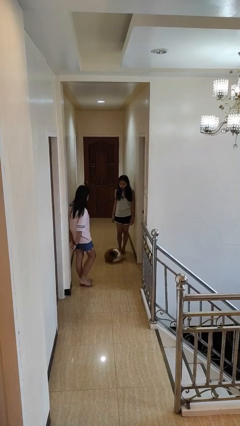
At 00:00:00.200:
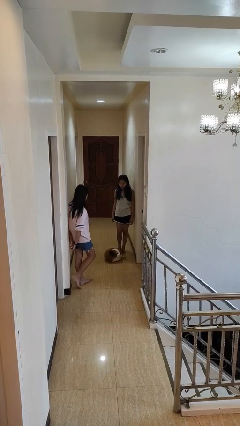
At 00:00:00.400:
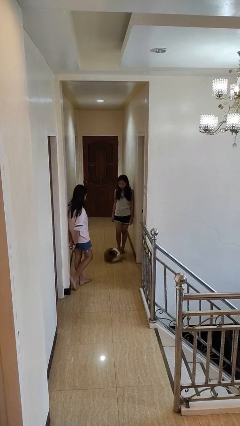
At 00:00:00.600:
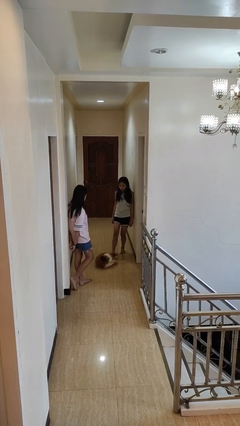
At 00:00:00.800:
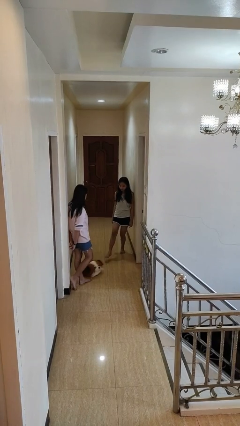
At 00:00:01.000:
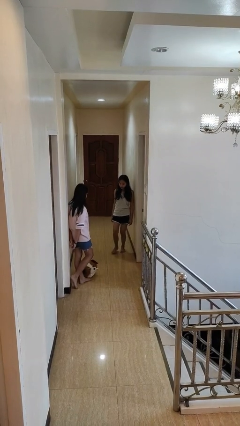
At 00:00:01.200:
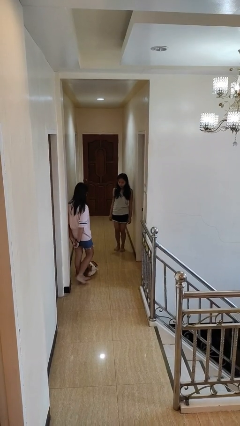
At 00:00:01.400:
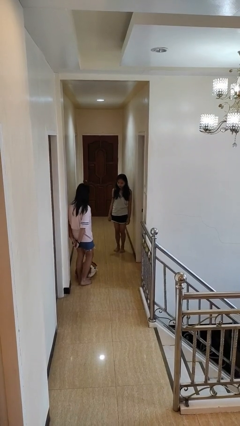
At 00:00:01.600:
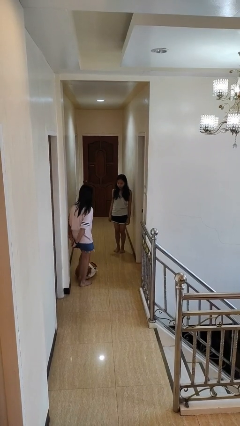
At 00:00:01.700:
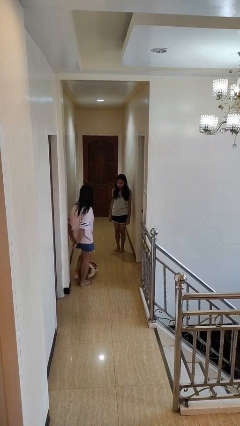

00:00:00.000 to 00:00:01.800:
person kicks object to person

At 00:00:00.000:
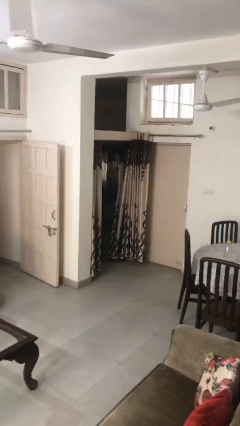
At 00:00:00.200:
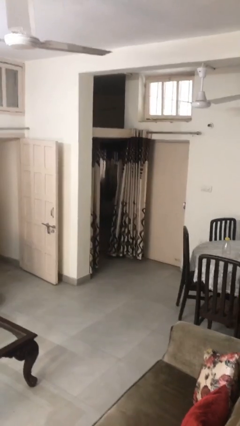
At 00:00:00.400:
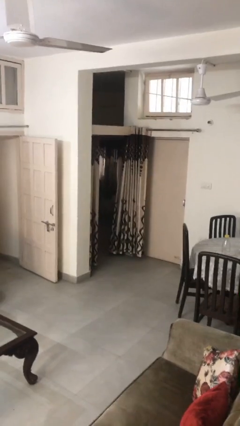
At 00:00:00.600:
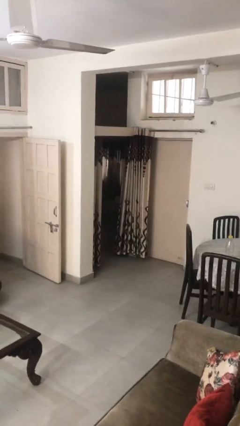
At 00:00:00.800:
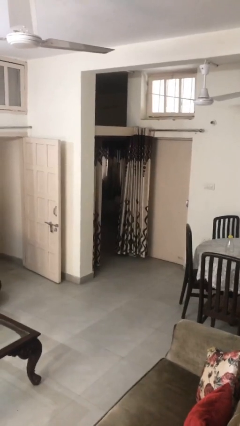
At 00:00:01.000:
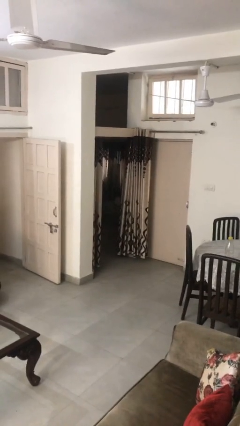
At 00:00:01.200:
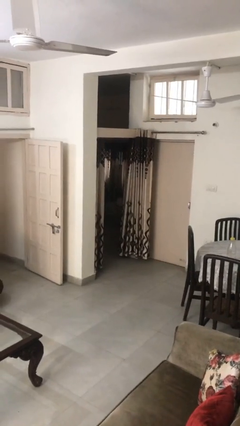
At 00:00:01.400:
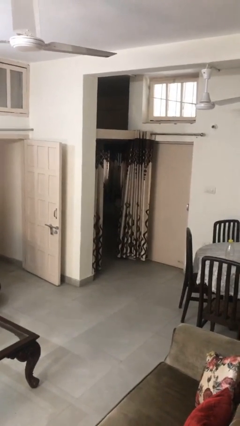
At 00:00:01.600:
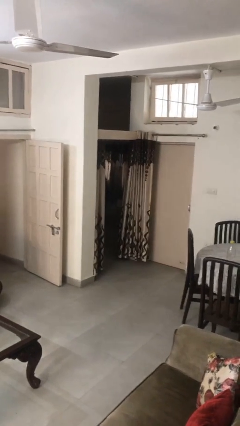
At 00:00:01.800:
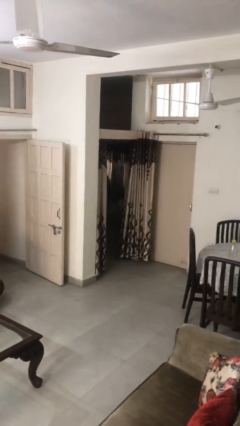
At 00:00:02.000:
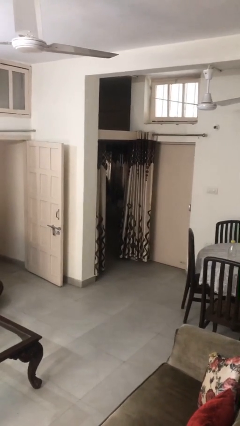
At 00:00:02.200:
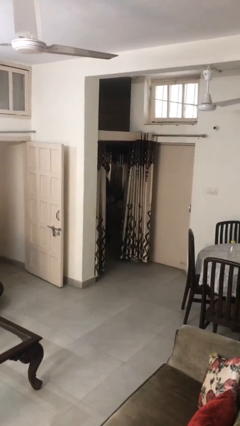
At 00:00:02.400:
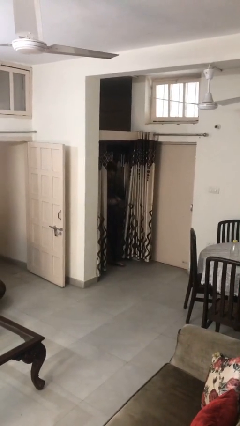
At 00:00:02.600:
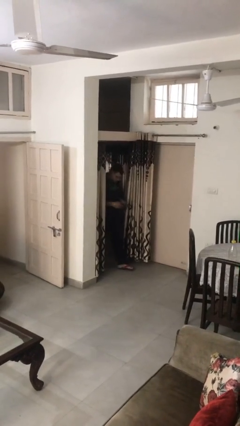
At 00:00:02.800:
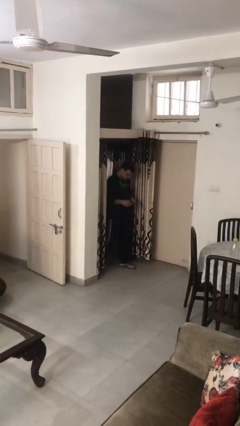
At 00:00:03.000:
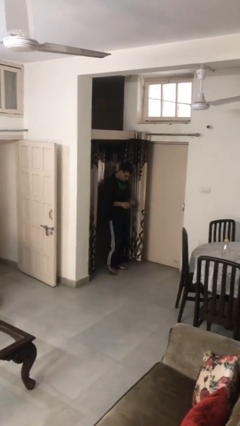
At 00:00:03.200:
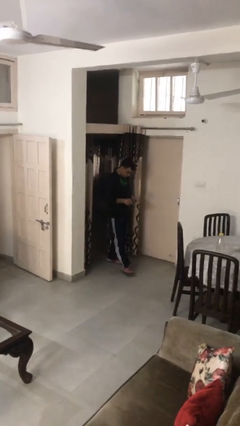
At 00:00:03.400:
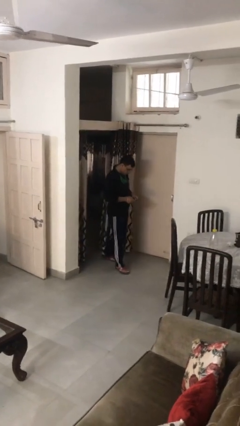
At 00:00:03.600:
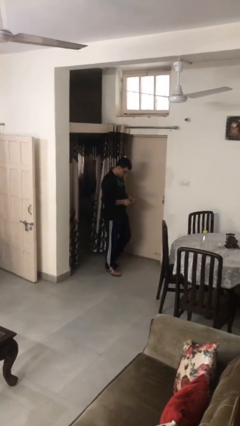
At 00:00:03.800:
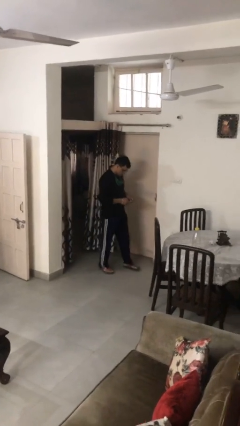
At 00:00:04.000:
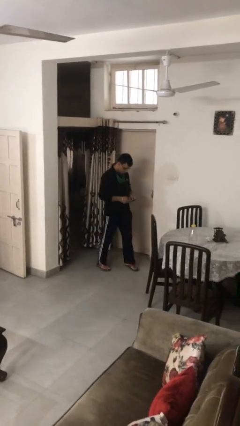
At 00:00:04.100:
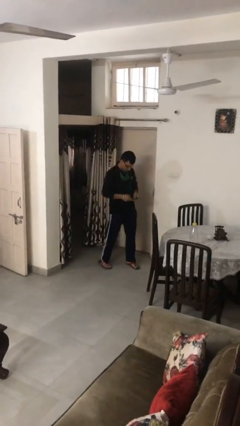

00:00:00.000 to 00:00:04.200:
person enters scene through structure

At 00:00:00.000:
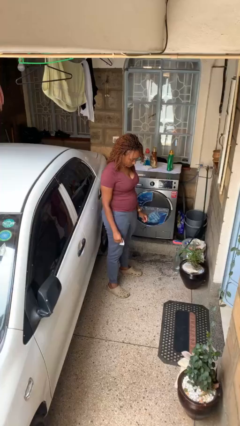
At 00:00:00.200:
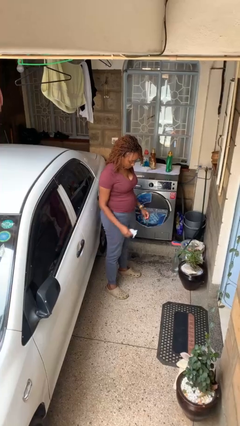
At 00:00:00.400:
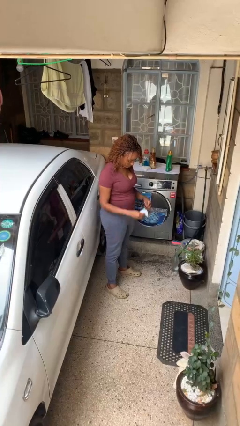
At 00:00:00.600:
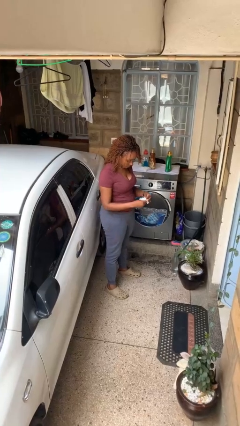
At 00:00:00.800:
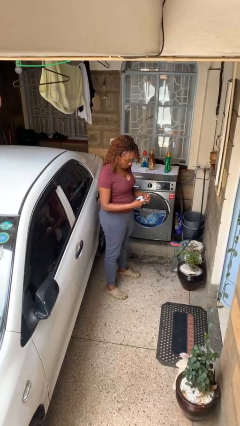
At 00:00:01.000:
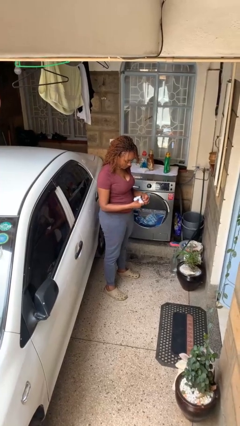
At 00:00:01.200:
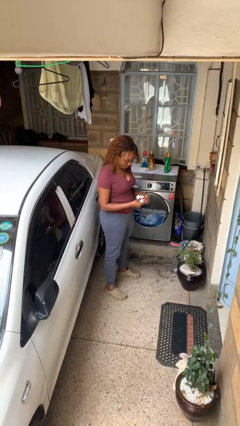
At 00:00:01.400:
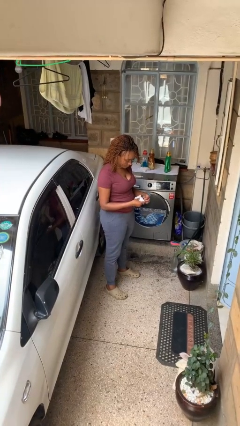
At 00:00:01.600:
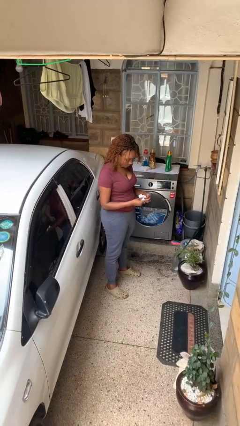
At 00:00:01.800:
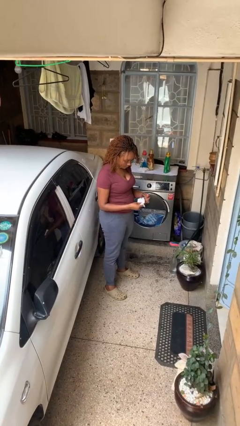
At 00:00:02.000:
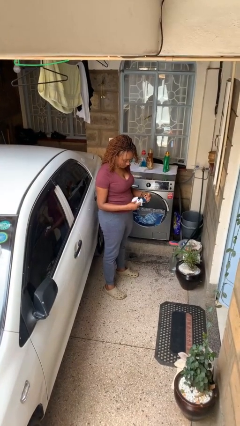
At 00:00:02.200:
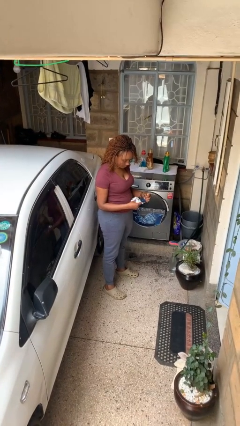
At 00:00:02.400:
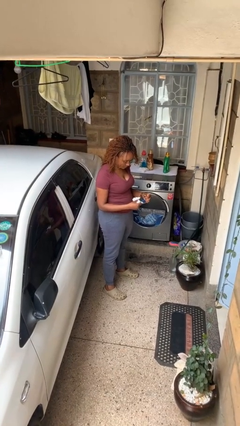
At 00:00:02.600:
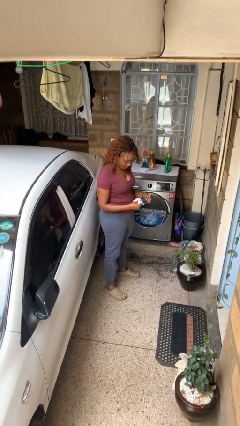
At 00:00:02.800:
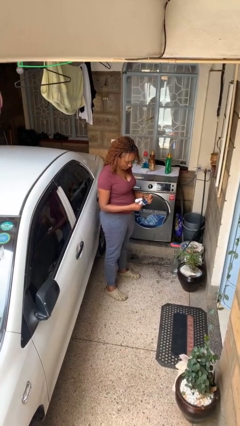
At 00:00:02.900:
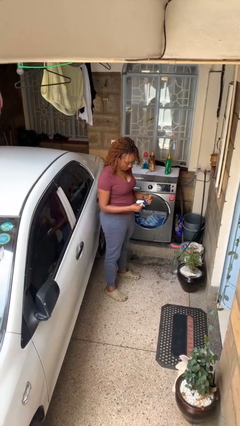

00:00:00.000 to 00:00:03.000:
person cleans eyeglasses

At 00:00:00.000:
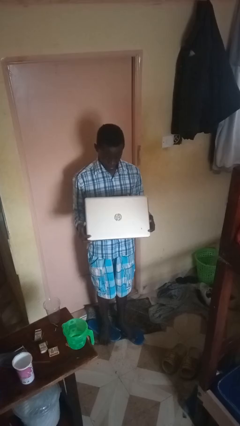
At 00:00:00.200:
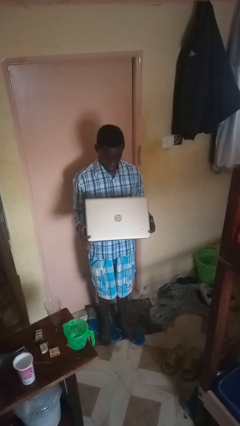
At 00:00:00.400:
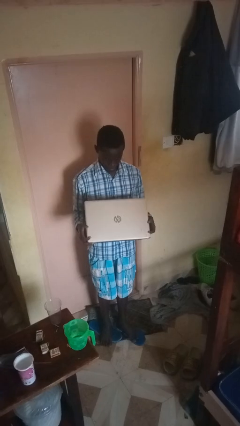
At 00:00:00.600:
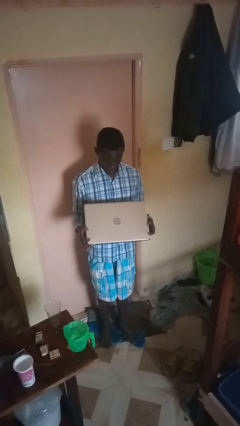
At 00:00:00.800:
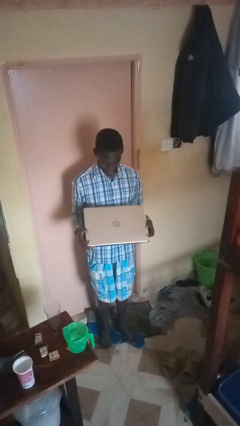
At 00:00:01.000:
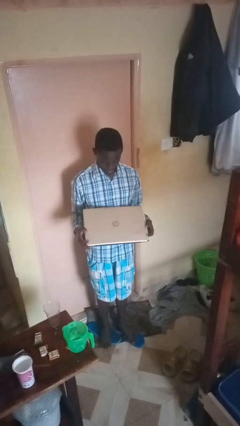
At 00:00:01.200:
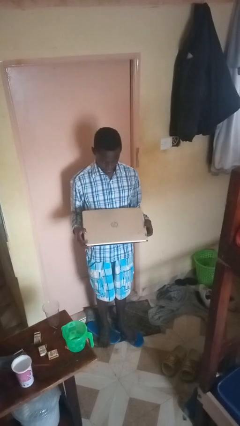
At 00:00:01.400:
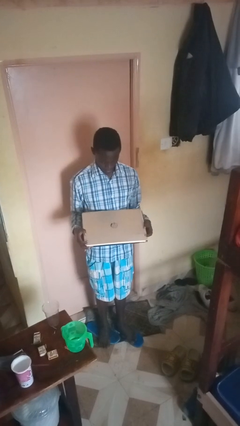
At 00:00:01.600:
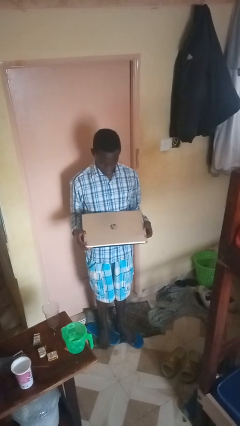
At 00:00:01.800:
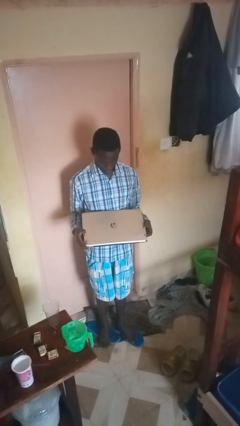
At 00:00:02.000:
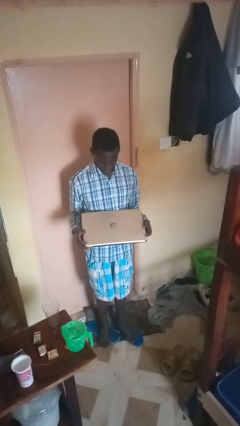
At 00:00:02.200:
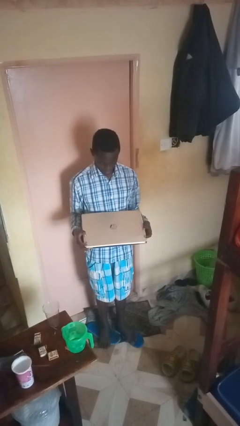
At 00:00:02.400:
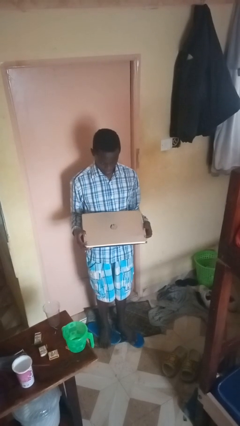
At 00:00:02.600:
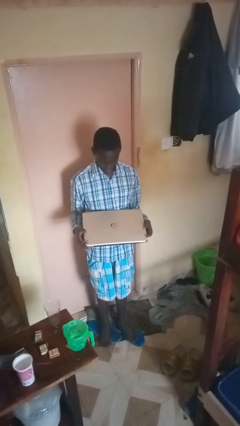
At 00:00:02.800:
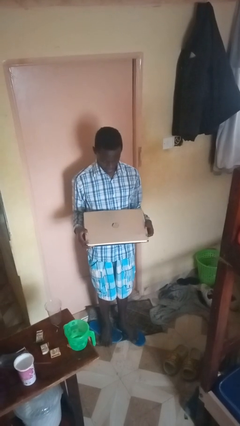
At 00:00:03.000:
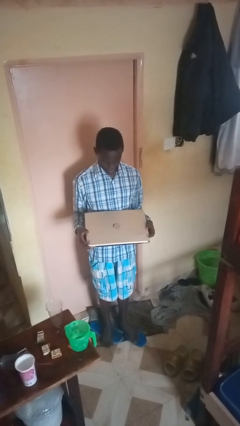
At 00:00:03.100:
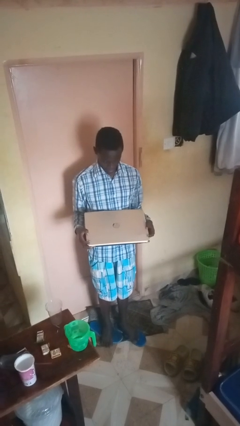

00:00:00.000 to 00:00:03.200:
person closes laptop

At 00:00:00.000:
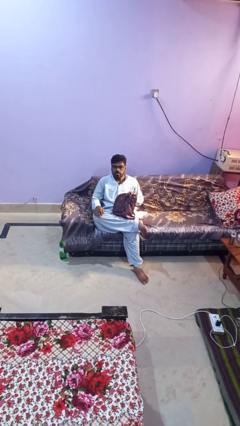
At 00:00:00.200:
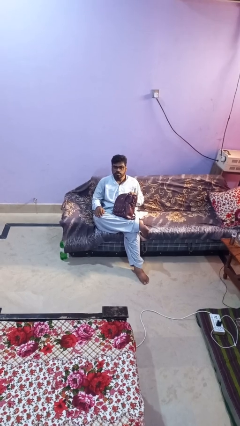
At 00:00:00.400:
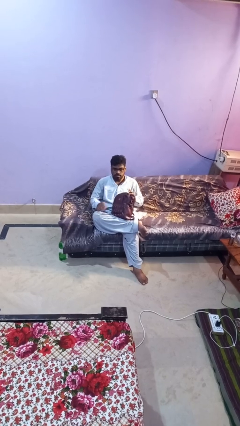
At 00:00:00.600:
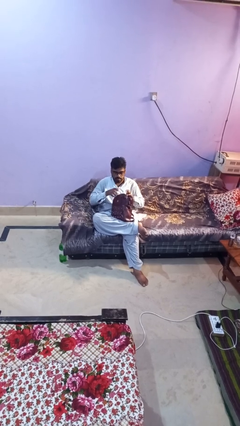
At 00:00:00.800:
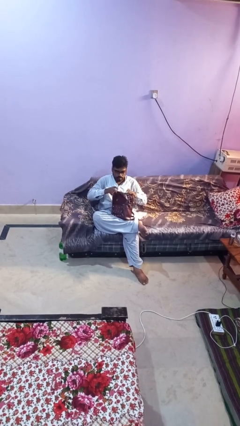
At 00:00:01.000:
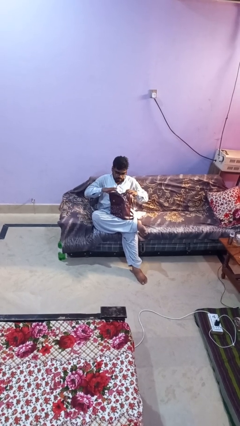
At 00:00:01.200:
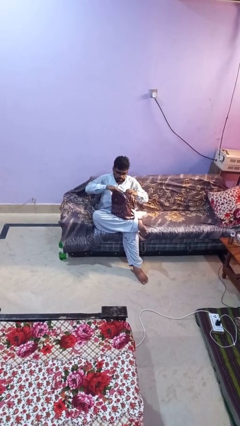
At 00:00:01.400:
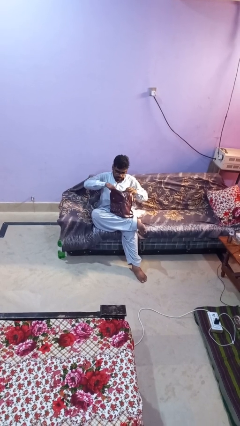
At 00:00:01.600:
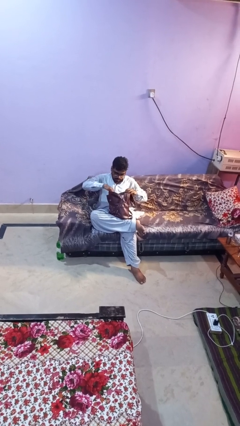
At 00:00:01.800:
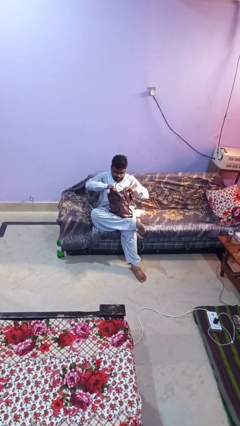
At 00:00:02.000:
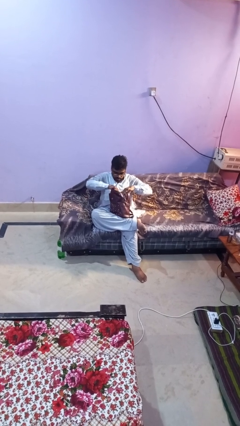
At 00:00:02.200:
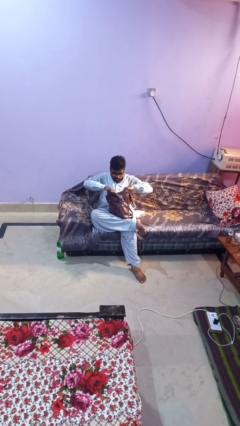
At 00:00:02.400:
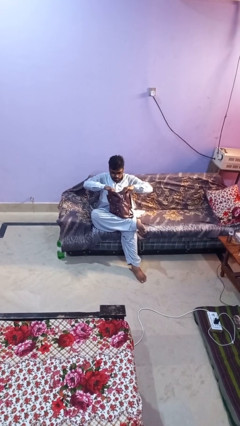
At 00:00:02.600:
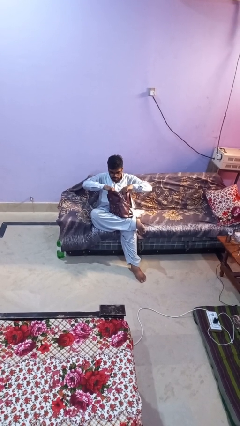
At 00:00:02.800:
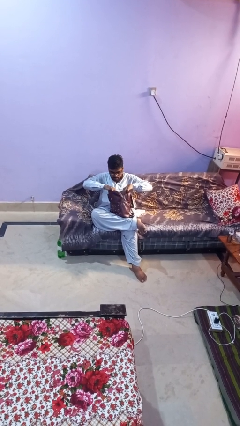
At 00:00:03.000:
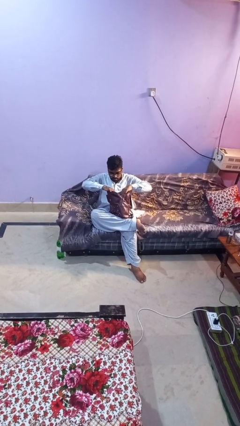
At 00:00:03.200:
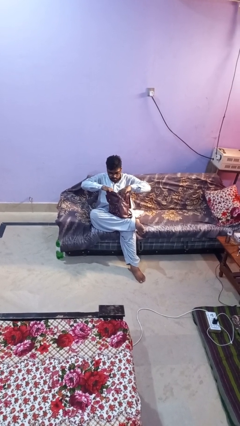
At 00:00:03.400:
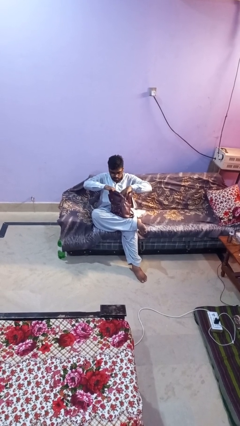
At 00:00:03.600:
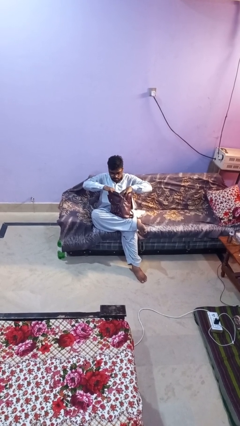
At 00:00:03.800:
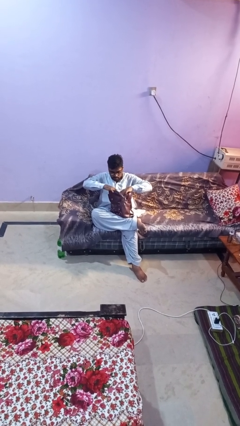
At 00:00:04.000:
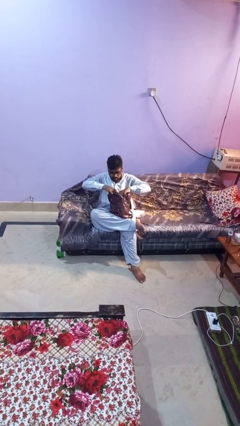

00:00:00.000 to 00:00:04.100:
person searches in backpack

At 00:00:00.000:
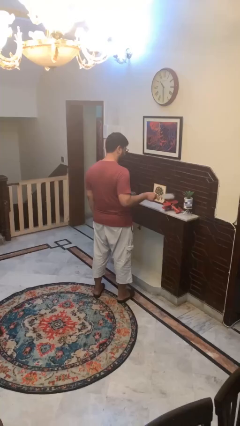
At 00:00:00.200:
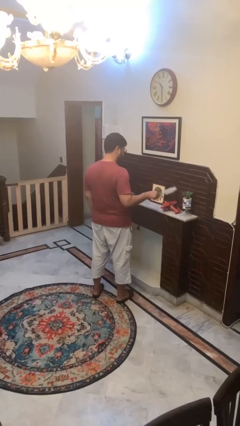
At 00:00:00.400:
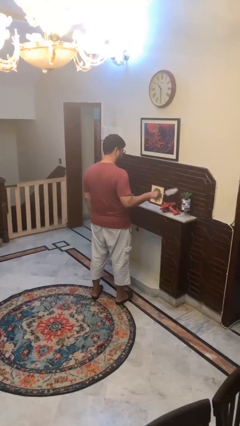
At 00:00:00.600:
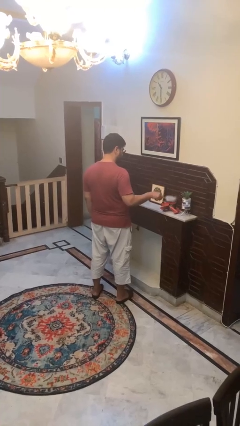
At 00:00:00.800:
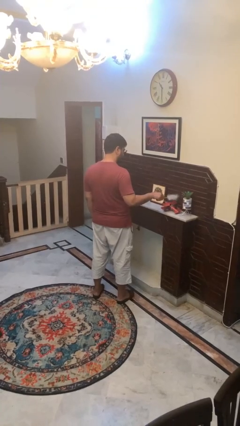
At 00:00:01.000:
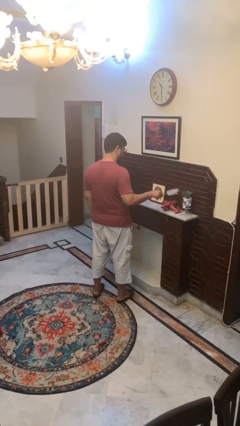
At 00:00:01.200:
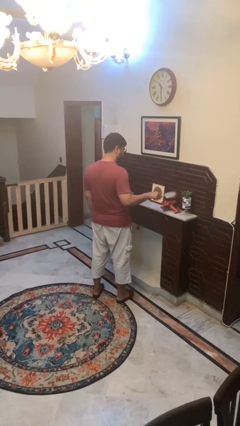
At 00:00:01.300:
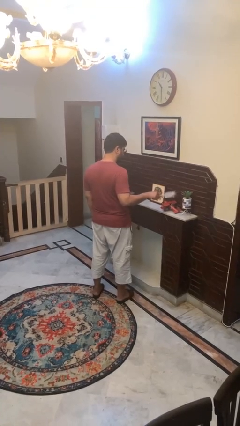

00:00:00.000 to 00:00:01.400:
person dusts furniture
